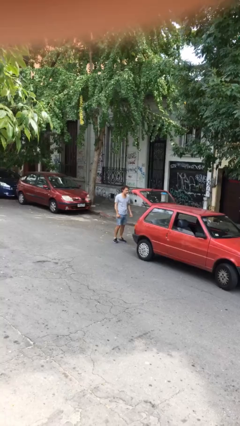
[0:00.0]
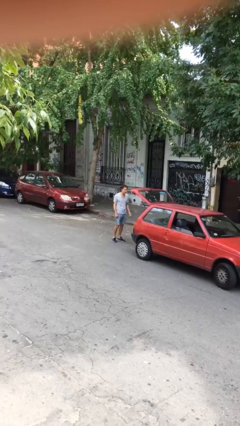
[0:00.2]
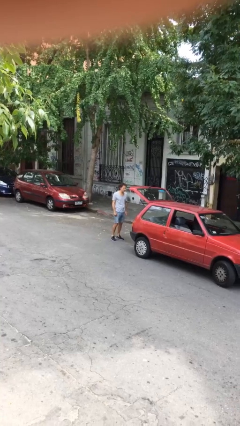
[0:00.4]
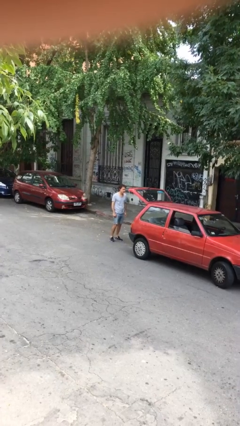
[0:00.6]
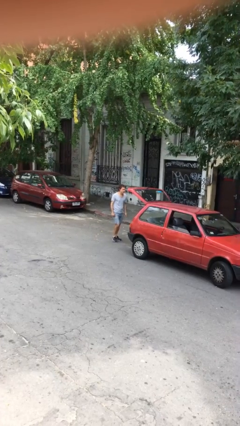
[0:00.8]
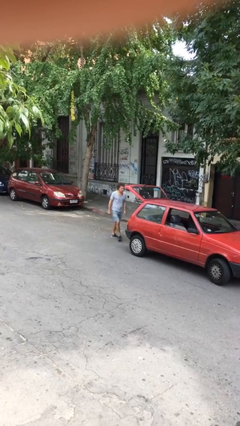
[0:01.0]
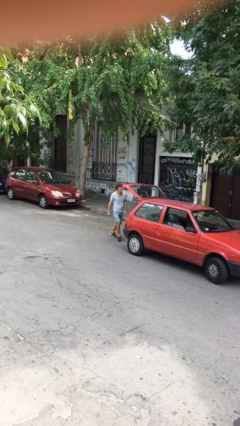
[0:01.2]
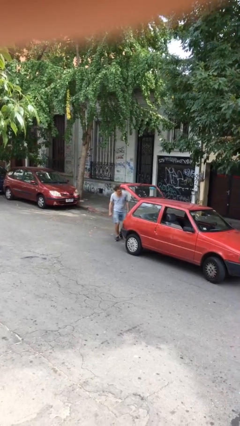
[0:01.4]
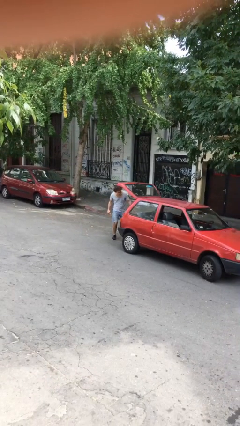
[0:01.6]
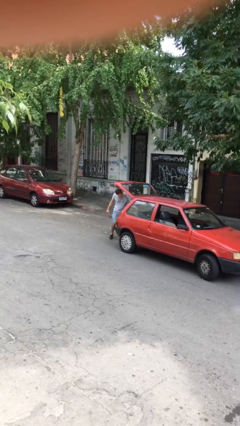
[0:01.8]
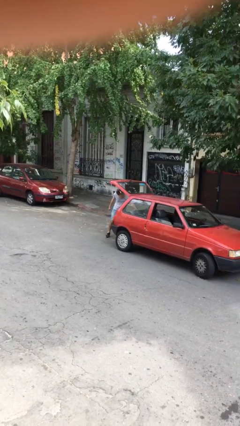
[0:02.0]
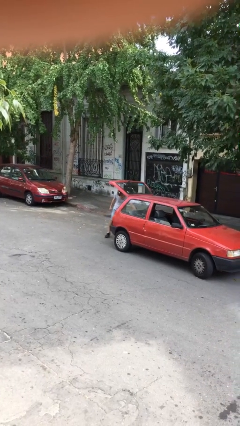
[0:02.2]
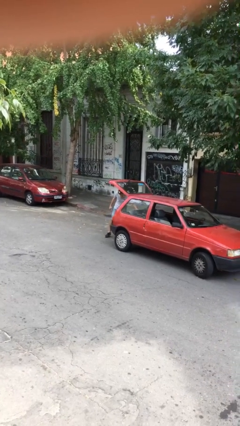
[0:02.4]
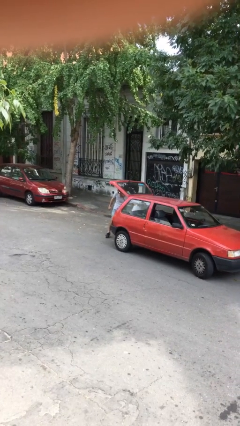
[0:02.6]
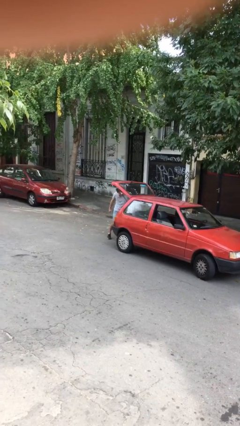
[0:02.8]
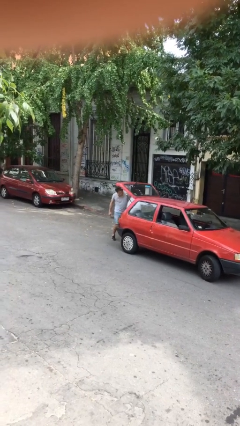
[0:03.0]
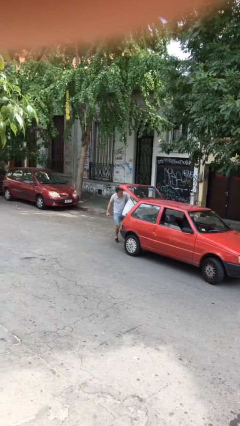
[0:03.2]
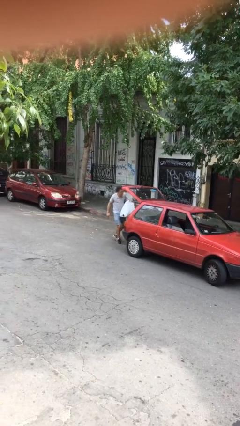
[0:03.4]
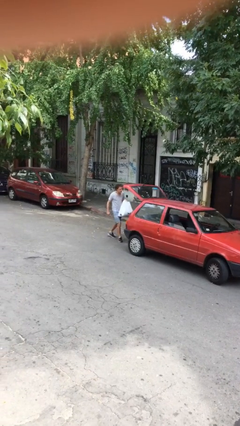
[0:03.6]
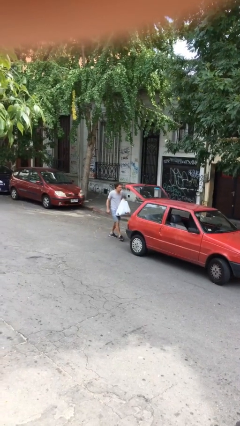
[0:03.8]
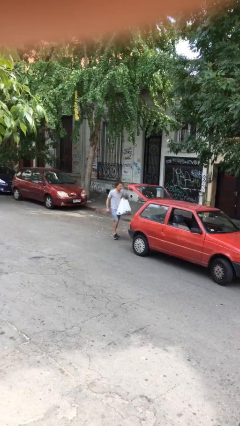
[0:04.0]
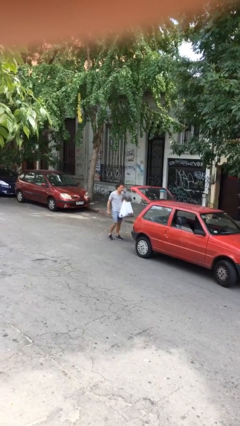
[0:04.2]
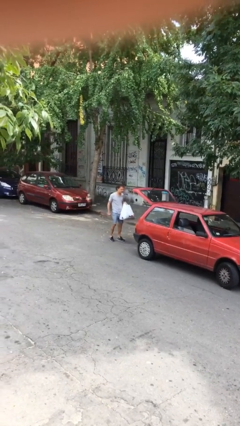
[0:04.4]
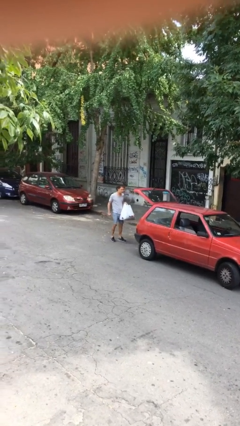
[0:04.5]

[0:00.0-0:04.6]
person unloads car

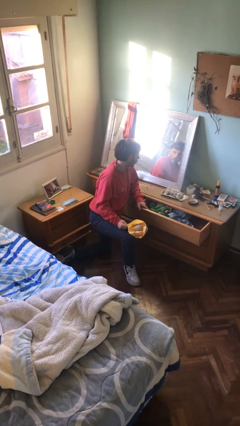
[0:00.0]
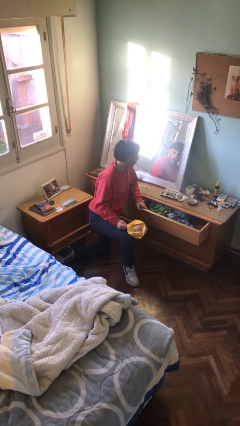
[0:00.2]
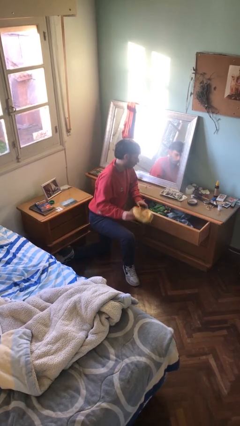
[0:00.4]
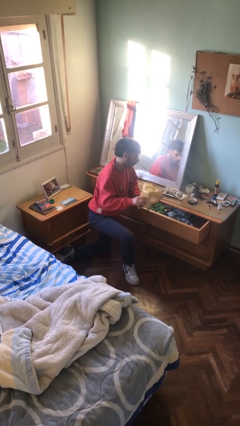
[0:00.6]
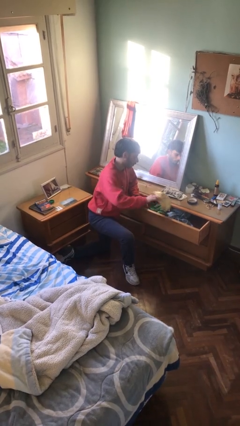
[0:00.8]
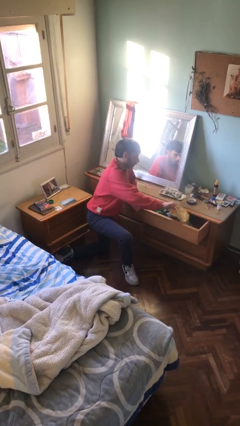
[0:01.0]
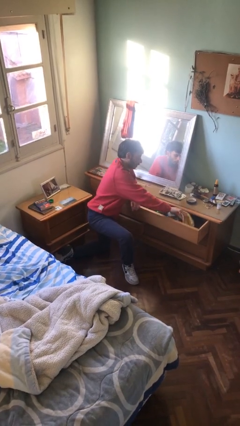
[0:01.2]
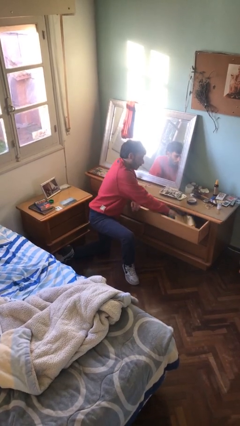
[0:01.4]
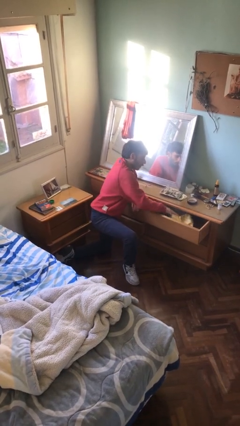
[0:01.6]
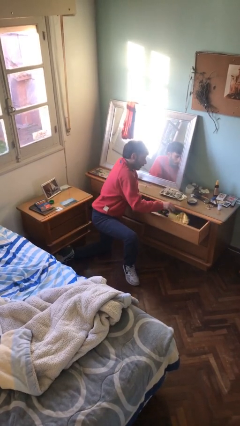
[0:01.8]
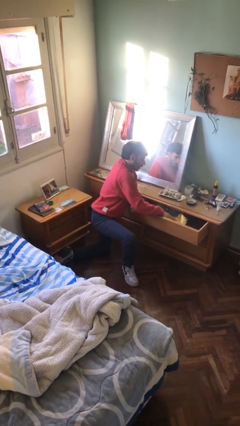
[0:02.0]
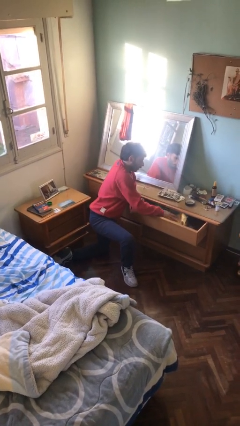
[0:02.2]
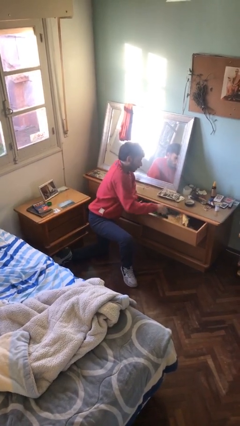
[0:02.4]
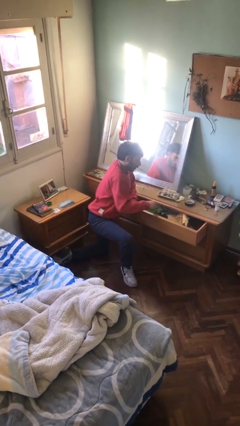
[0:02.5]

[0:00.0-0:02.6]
person puts clothes into dresser

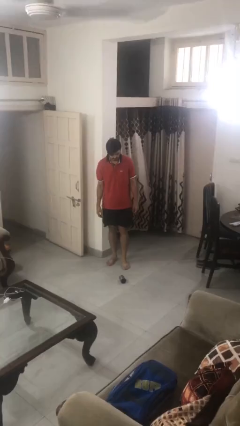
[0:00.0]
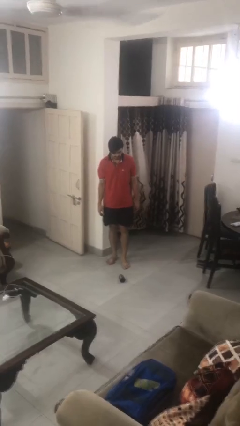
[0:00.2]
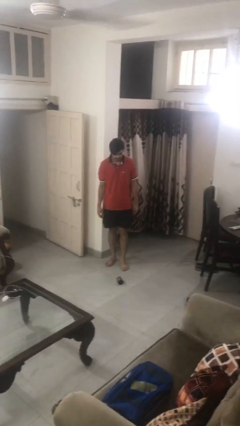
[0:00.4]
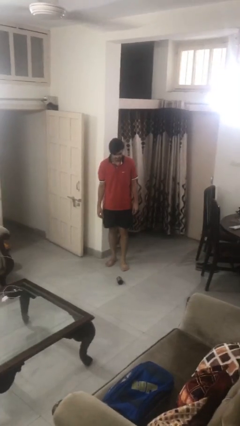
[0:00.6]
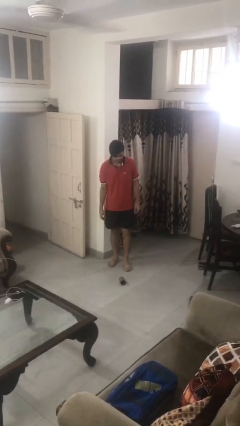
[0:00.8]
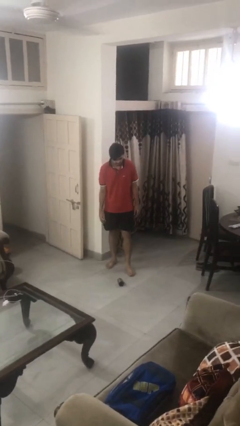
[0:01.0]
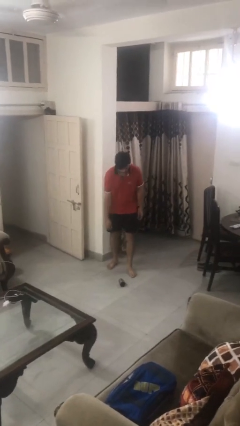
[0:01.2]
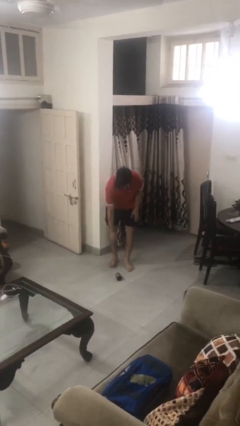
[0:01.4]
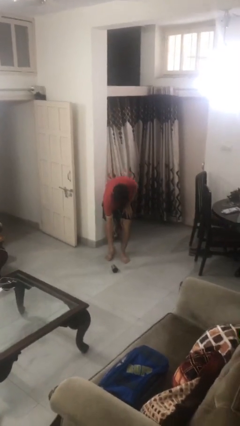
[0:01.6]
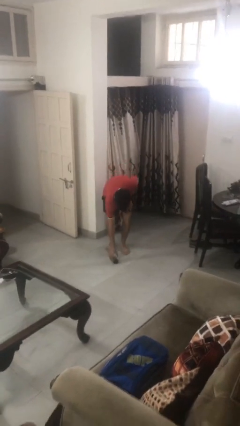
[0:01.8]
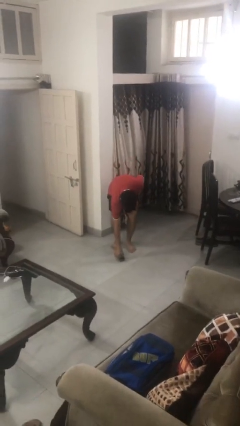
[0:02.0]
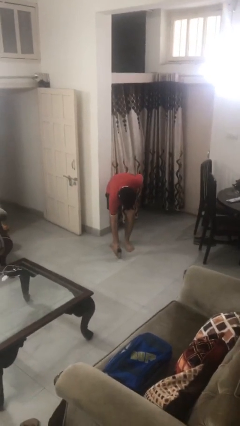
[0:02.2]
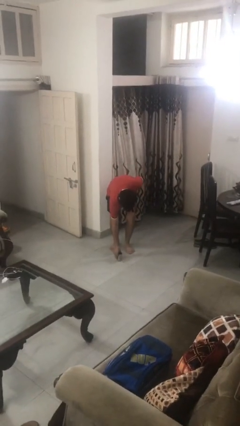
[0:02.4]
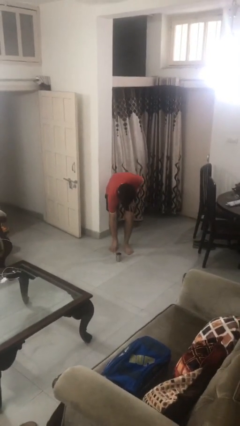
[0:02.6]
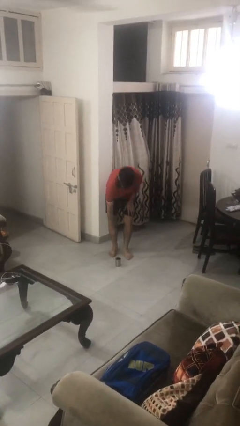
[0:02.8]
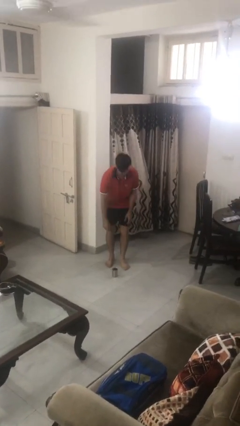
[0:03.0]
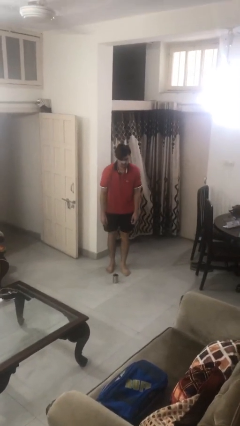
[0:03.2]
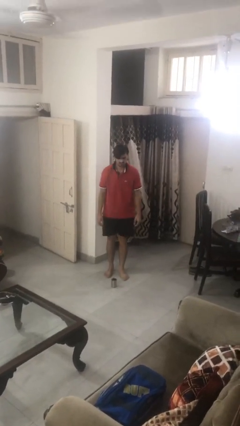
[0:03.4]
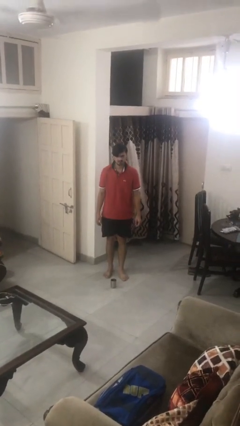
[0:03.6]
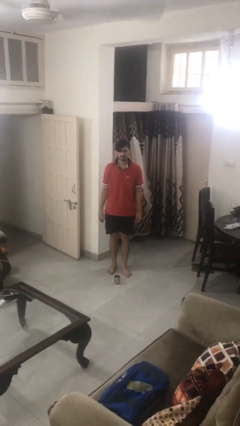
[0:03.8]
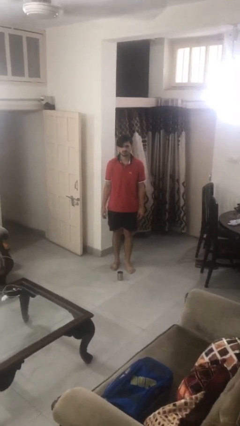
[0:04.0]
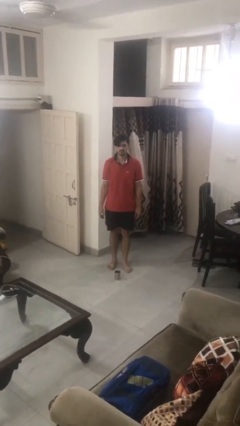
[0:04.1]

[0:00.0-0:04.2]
person sets upright glass

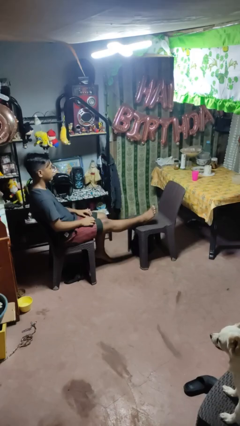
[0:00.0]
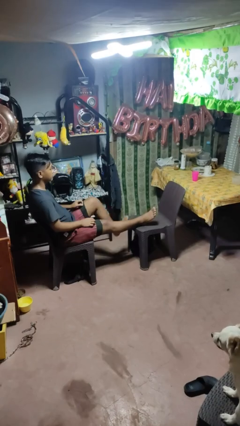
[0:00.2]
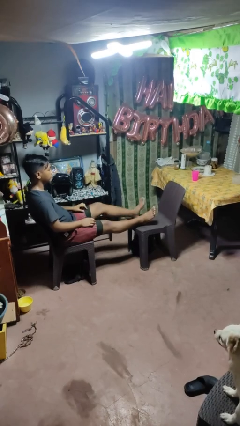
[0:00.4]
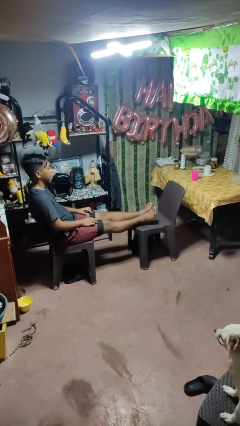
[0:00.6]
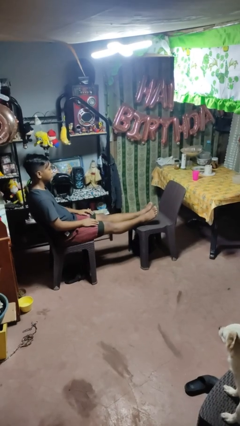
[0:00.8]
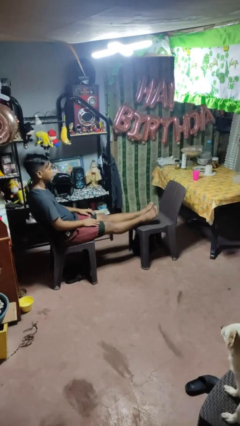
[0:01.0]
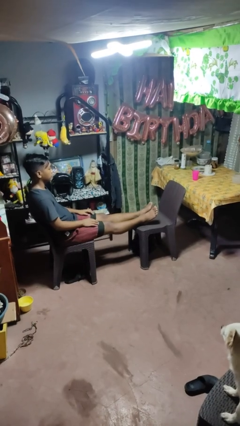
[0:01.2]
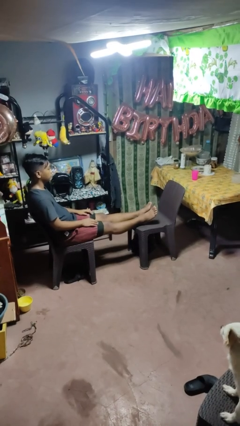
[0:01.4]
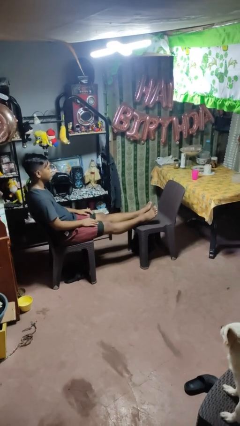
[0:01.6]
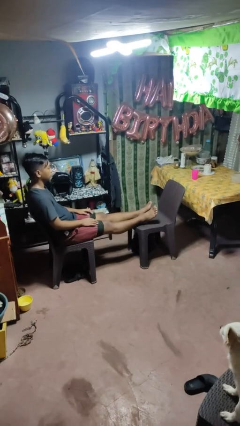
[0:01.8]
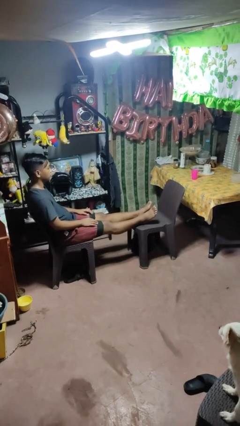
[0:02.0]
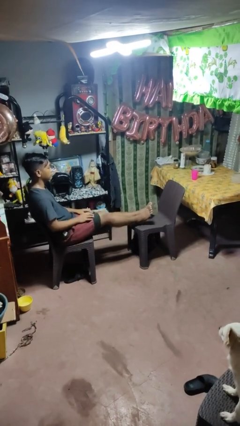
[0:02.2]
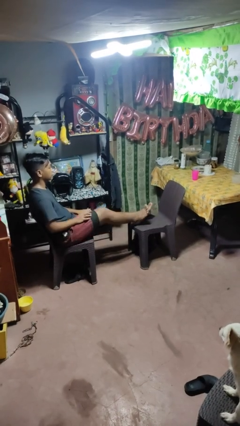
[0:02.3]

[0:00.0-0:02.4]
person puts feet up

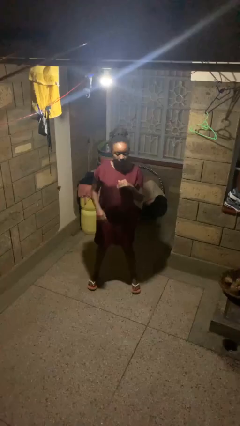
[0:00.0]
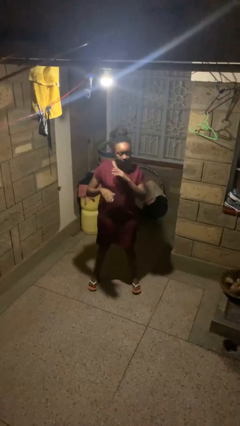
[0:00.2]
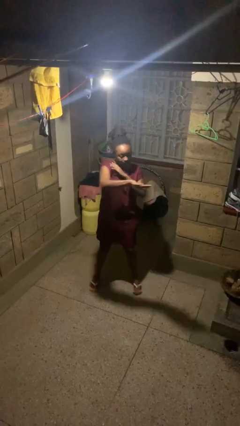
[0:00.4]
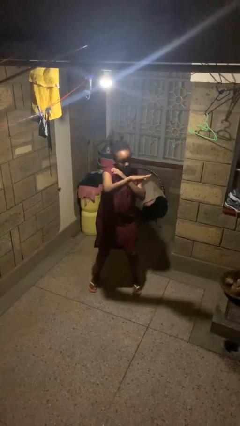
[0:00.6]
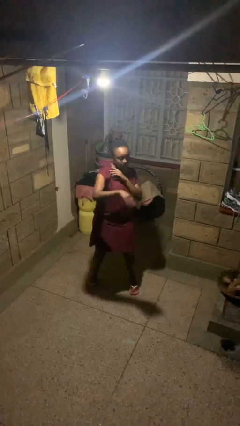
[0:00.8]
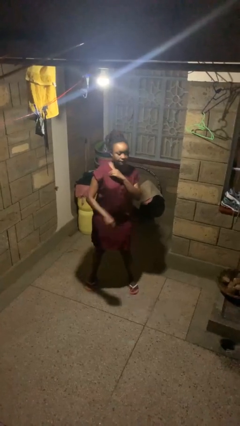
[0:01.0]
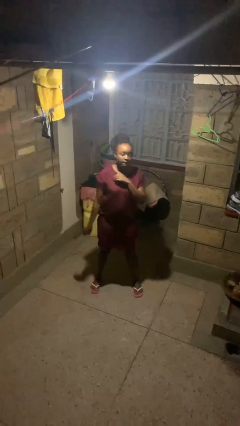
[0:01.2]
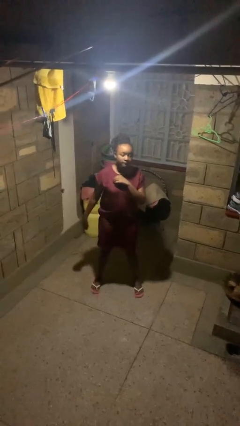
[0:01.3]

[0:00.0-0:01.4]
person karate chop

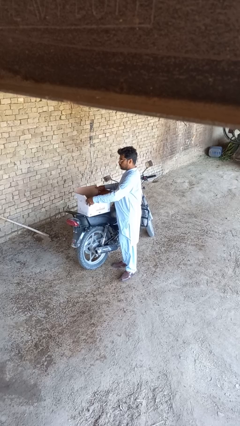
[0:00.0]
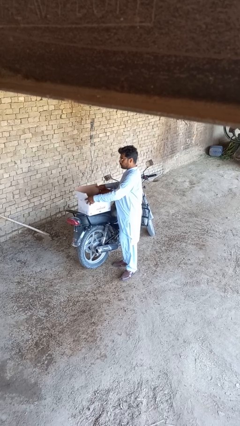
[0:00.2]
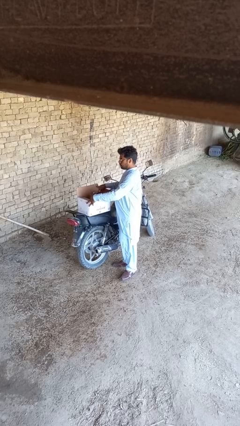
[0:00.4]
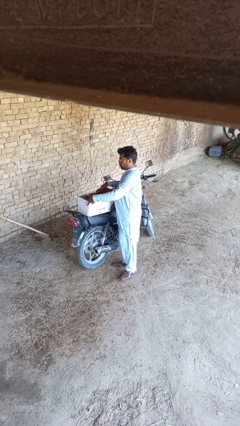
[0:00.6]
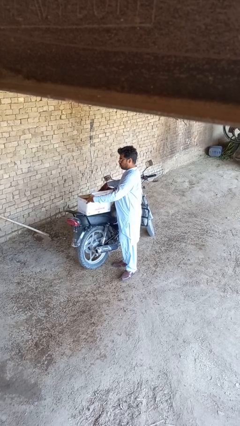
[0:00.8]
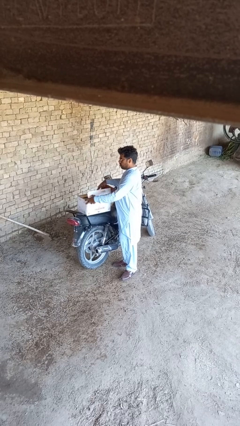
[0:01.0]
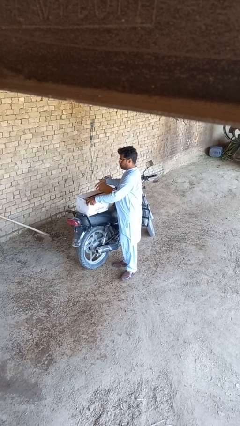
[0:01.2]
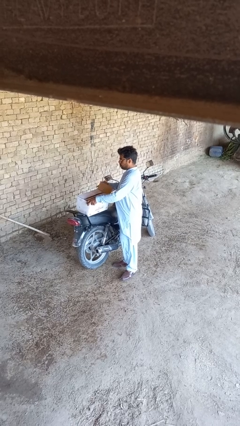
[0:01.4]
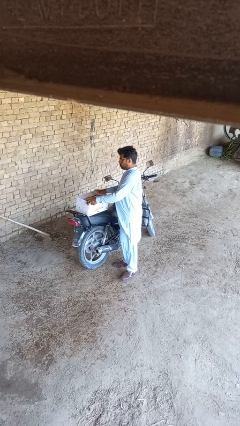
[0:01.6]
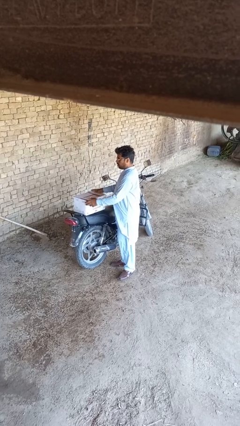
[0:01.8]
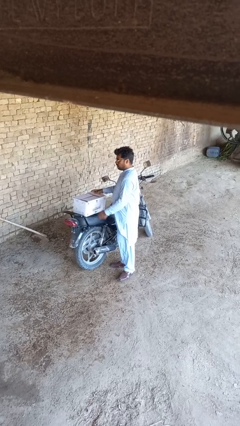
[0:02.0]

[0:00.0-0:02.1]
person closes box
